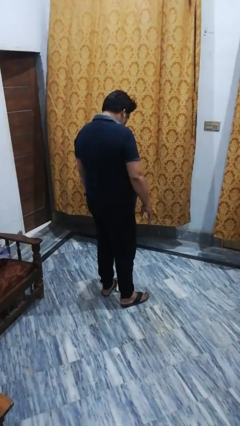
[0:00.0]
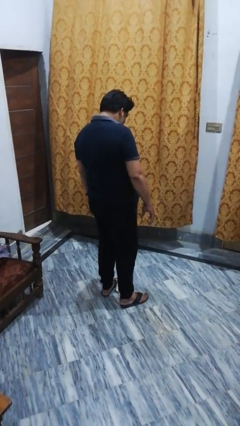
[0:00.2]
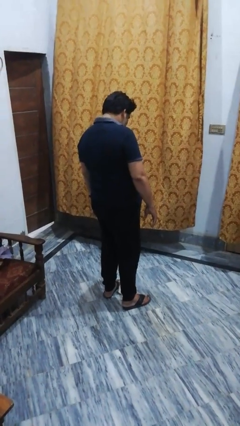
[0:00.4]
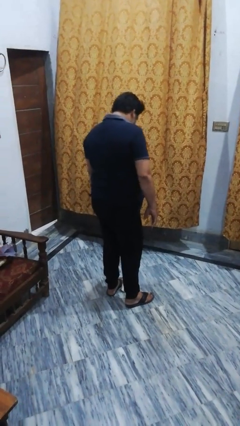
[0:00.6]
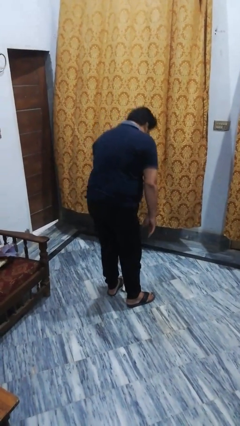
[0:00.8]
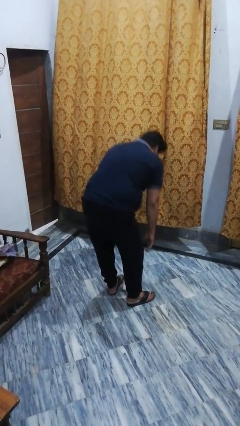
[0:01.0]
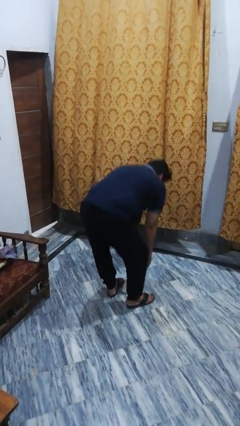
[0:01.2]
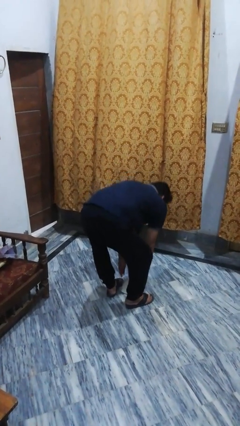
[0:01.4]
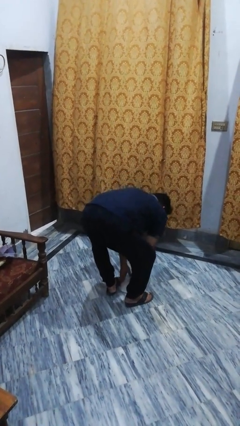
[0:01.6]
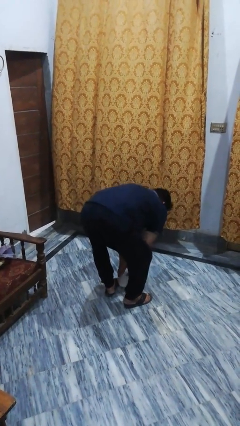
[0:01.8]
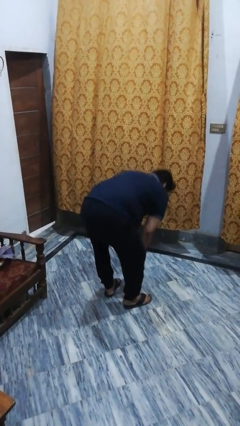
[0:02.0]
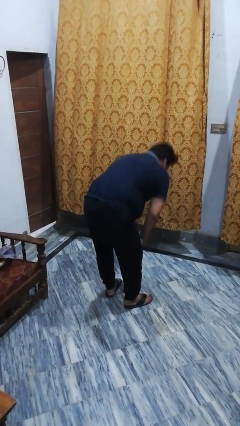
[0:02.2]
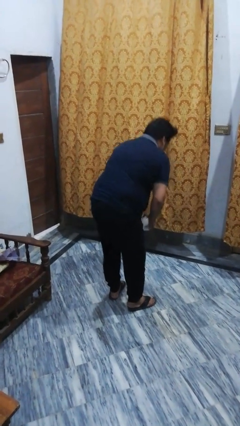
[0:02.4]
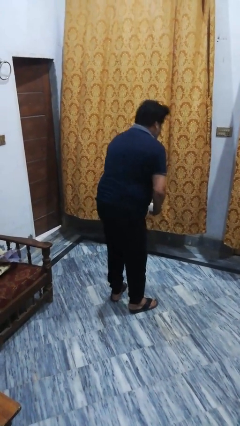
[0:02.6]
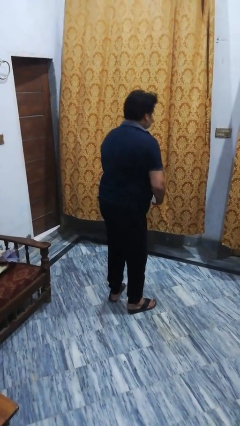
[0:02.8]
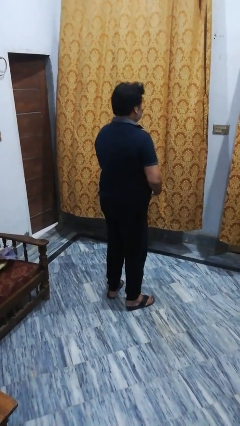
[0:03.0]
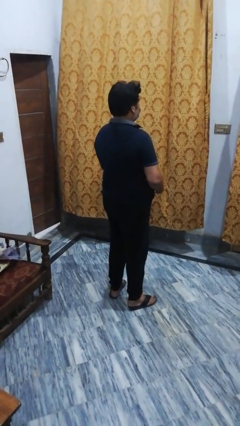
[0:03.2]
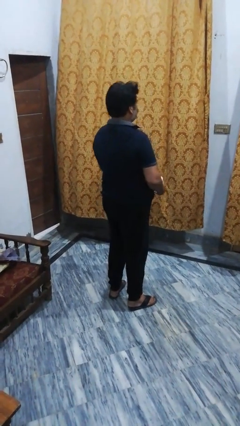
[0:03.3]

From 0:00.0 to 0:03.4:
person picks up object from floor

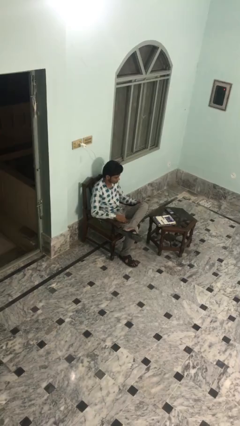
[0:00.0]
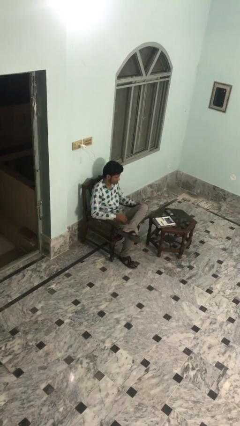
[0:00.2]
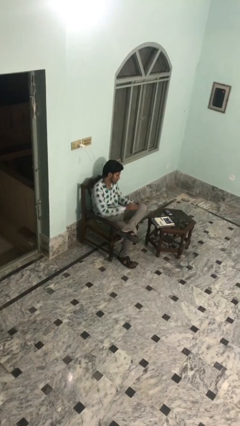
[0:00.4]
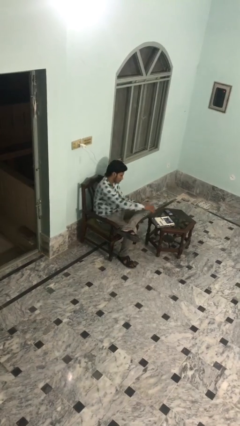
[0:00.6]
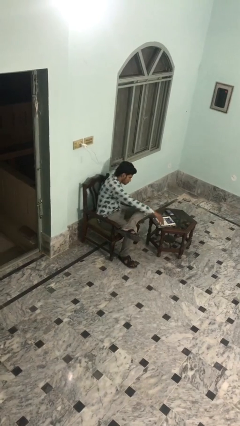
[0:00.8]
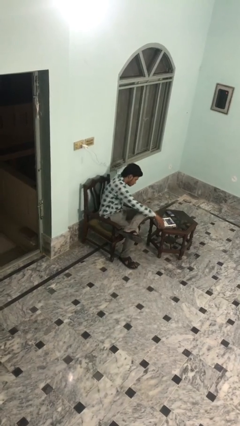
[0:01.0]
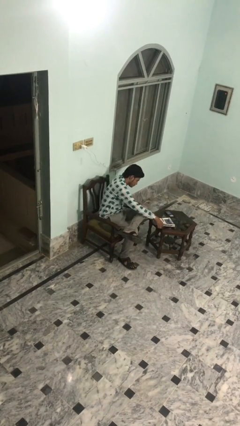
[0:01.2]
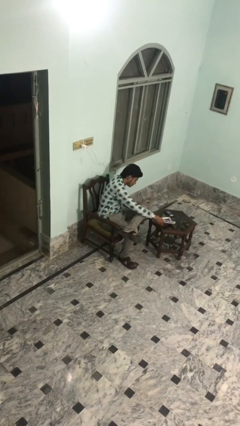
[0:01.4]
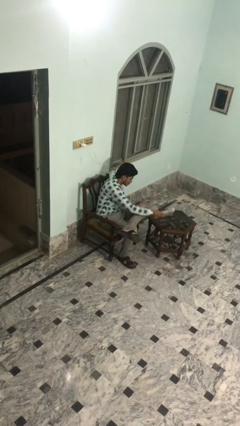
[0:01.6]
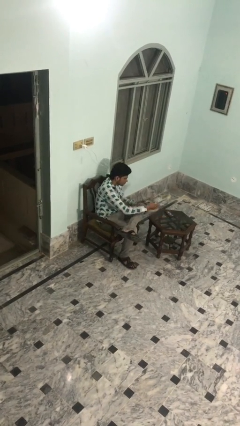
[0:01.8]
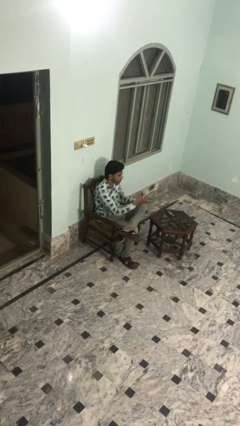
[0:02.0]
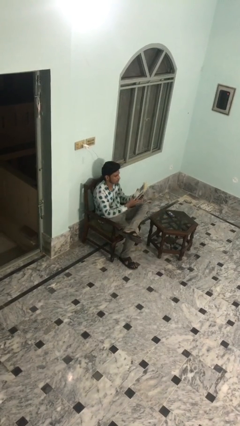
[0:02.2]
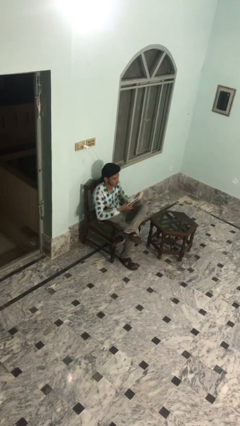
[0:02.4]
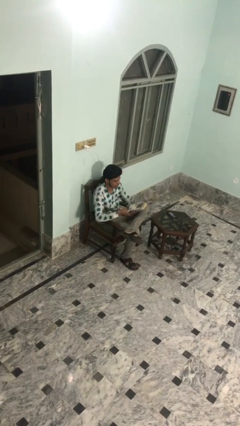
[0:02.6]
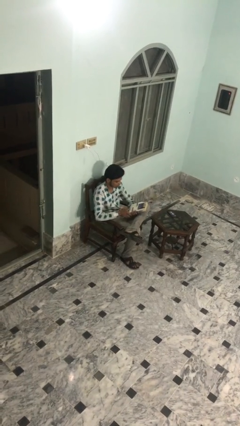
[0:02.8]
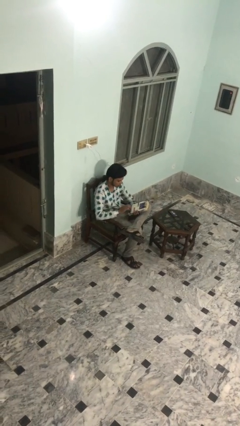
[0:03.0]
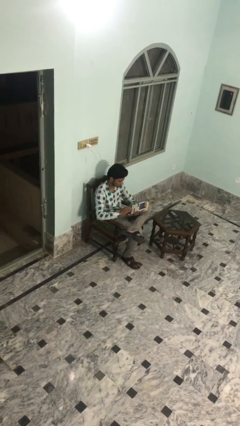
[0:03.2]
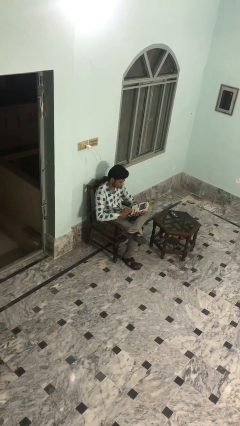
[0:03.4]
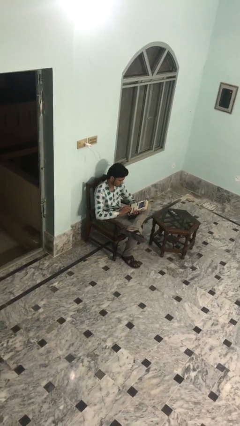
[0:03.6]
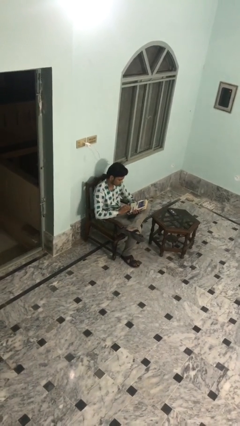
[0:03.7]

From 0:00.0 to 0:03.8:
person picks up object from table

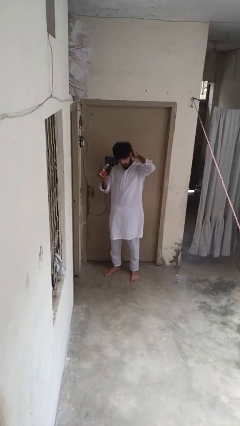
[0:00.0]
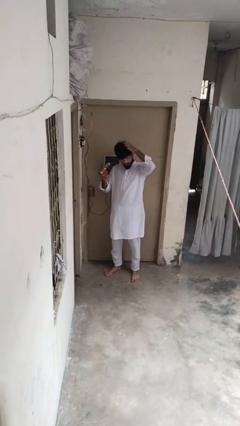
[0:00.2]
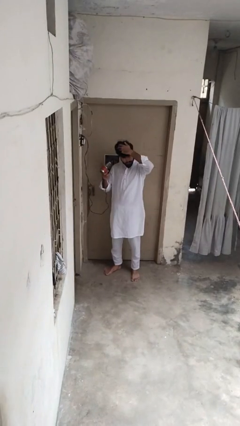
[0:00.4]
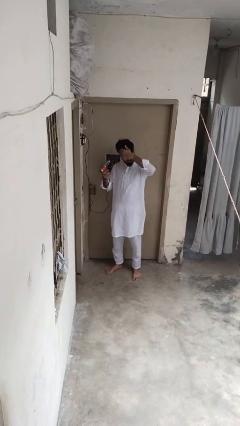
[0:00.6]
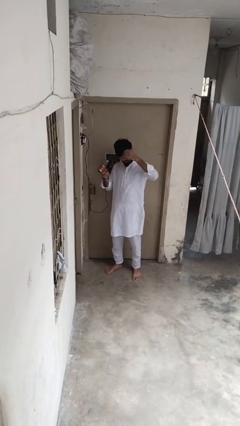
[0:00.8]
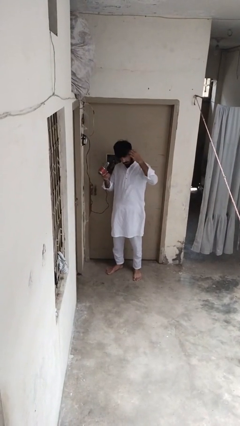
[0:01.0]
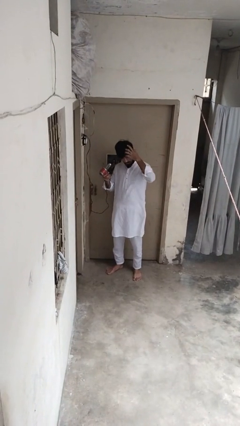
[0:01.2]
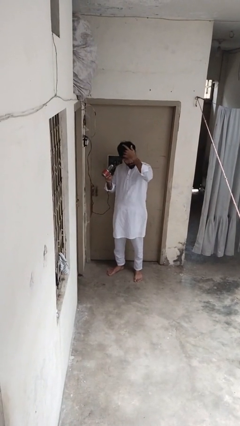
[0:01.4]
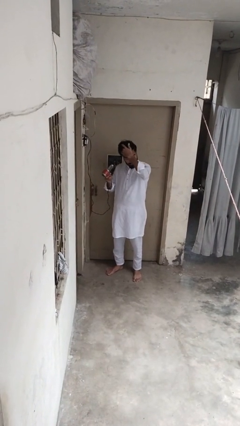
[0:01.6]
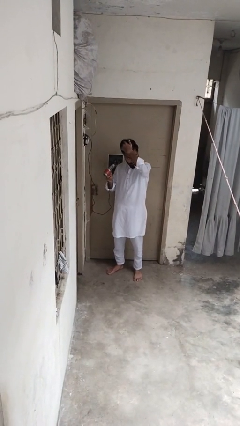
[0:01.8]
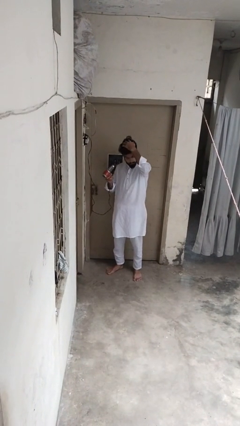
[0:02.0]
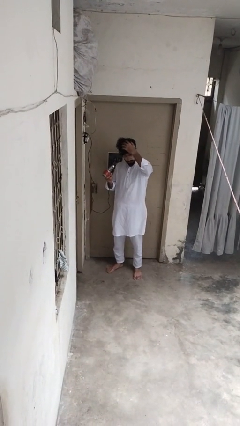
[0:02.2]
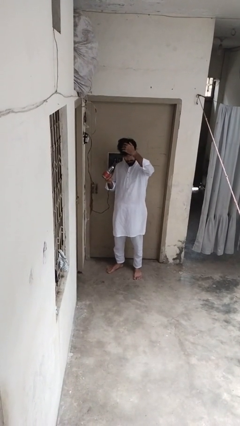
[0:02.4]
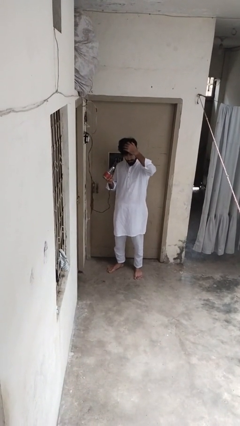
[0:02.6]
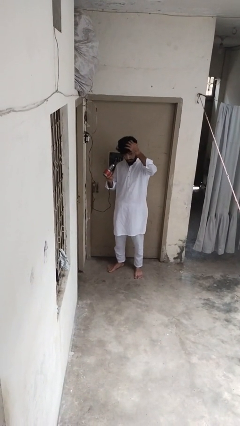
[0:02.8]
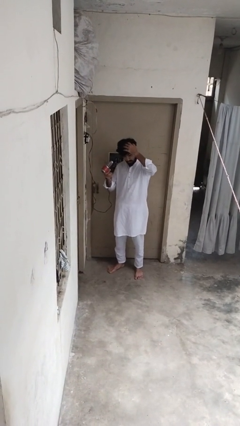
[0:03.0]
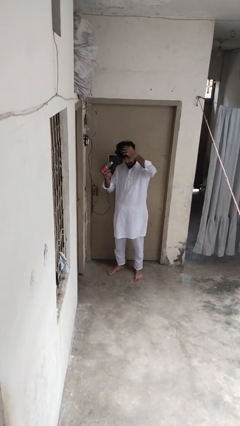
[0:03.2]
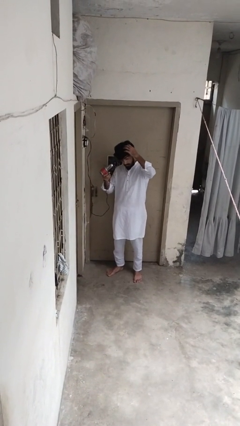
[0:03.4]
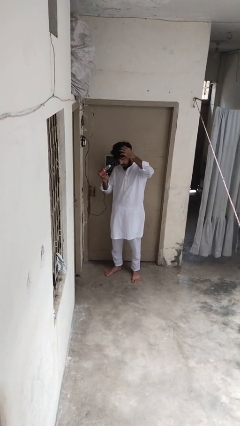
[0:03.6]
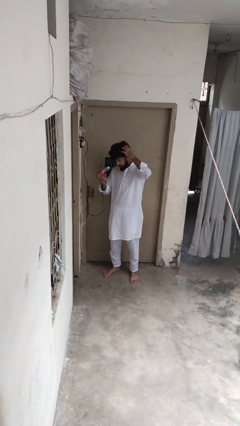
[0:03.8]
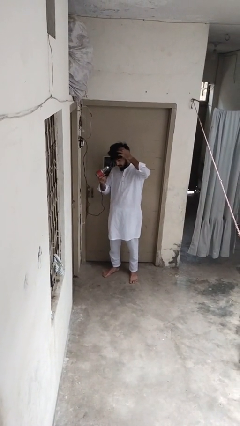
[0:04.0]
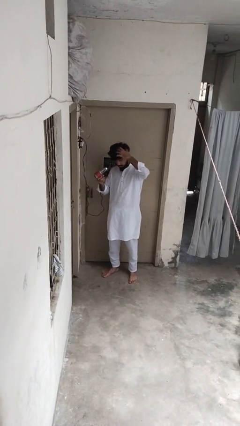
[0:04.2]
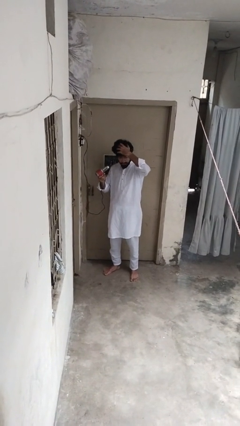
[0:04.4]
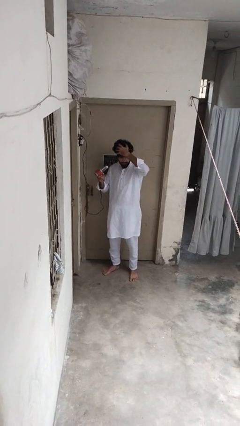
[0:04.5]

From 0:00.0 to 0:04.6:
person dries hair with hairdryer

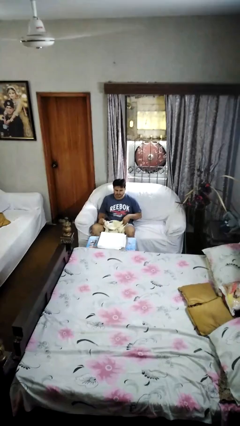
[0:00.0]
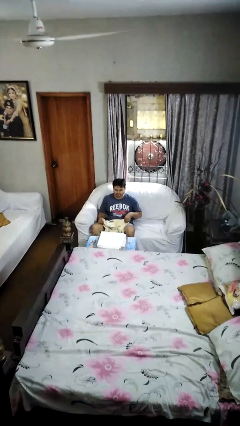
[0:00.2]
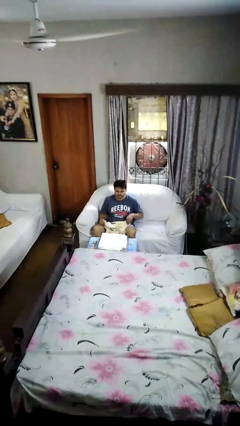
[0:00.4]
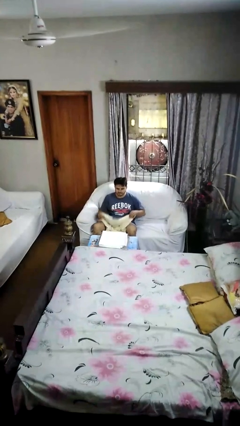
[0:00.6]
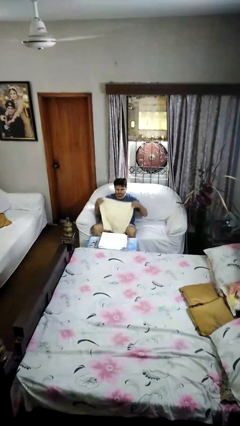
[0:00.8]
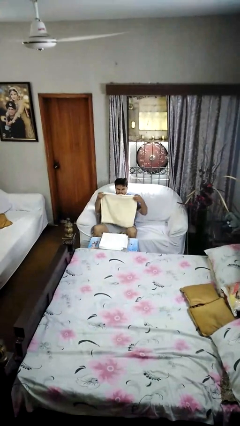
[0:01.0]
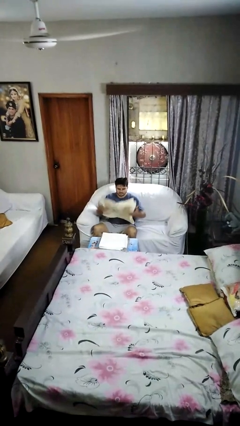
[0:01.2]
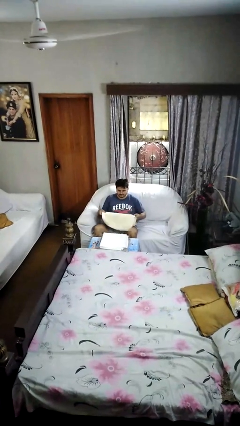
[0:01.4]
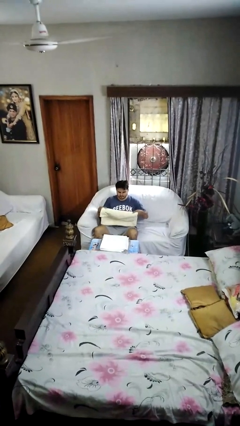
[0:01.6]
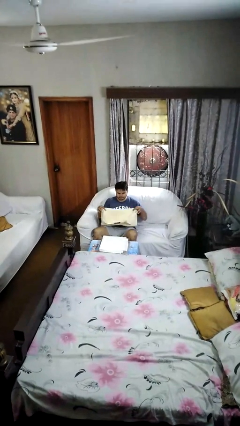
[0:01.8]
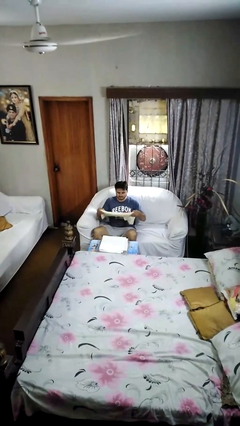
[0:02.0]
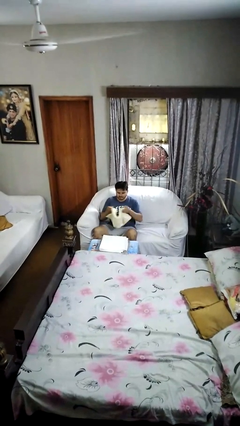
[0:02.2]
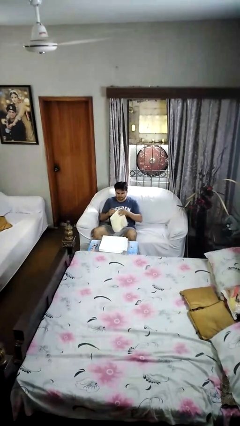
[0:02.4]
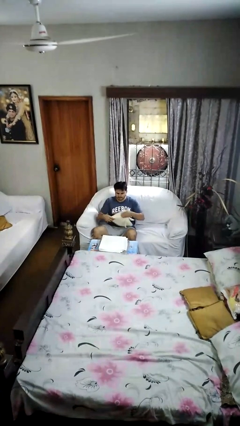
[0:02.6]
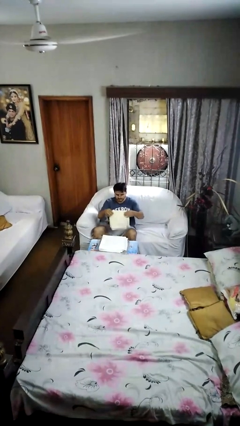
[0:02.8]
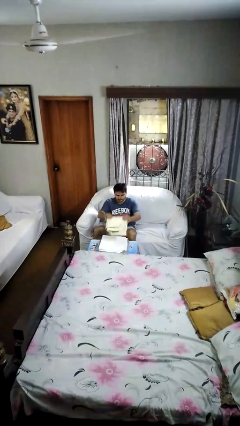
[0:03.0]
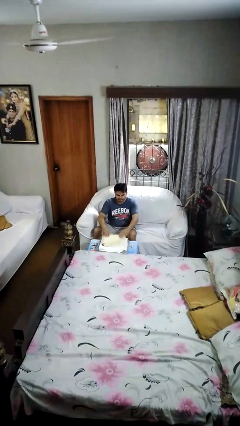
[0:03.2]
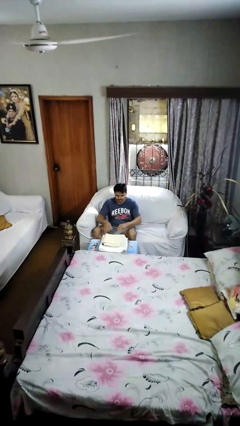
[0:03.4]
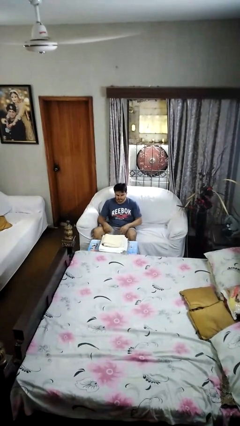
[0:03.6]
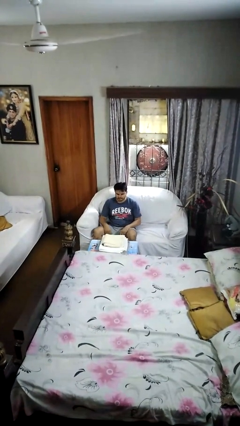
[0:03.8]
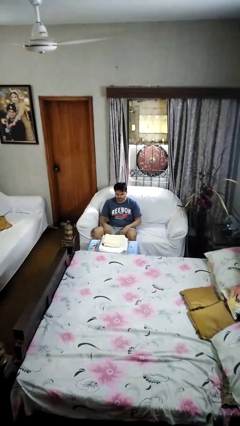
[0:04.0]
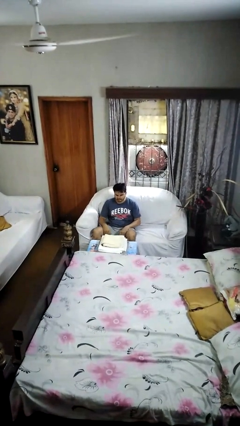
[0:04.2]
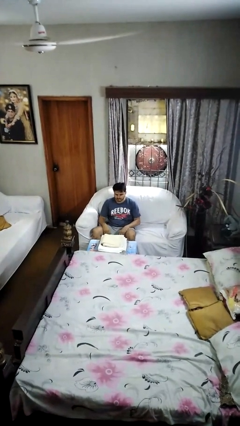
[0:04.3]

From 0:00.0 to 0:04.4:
person folds towel

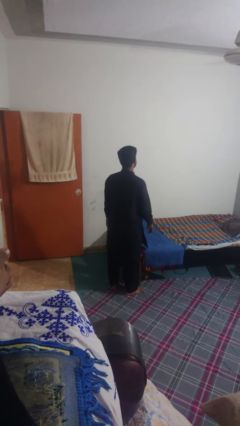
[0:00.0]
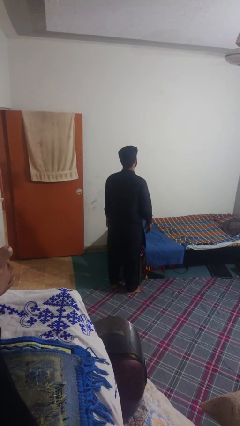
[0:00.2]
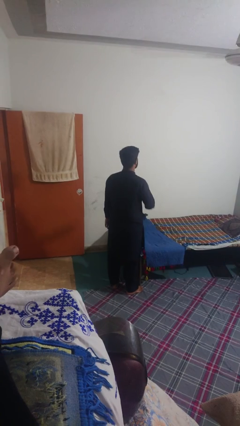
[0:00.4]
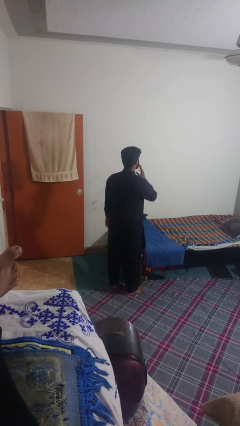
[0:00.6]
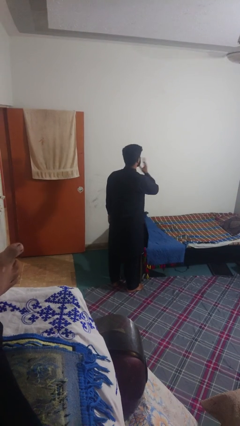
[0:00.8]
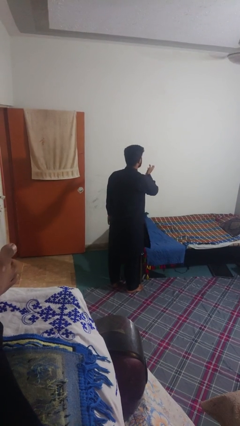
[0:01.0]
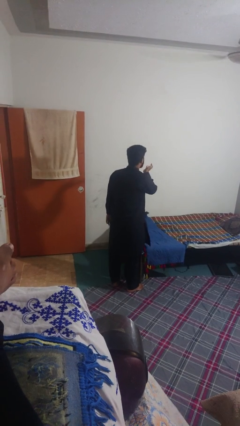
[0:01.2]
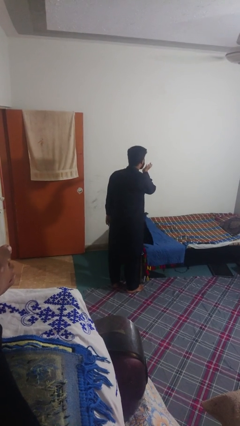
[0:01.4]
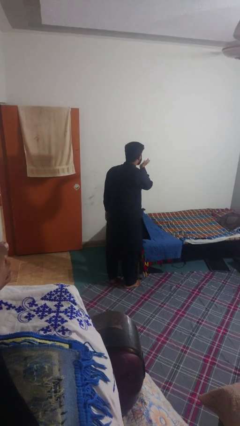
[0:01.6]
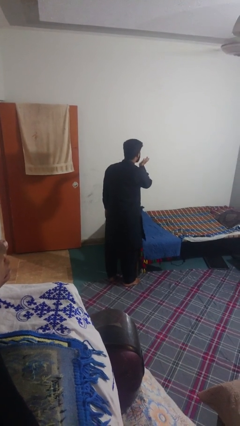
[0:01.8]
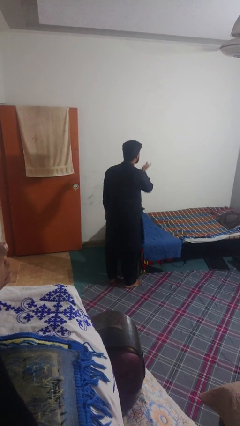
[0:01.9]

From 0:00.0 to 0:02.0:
person gestures blow kiss
